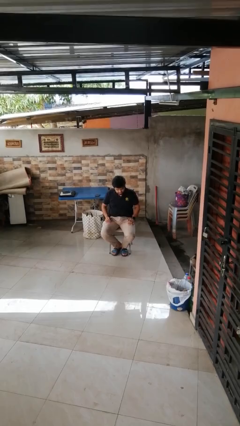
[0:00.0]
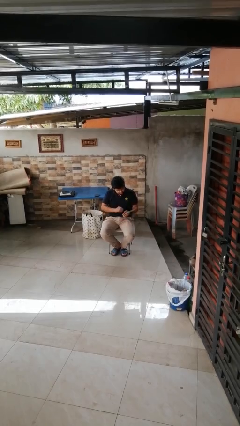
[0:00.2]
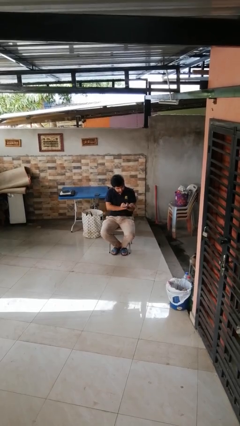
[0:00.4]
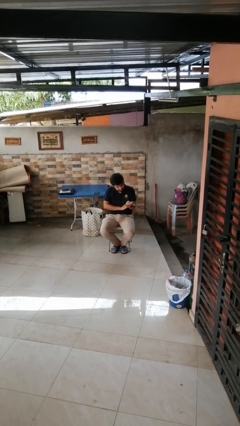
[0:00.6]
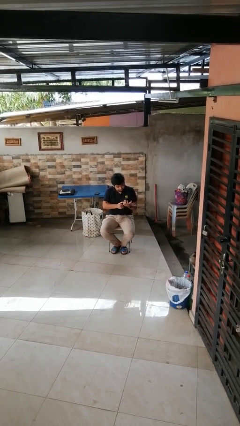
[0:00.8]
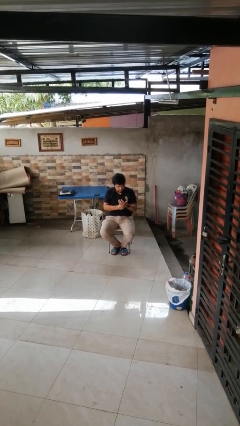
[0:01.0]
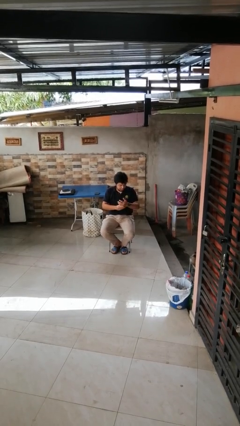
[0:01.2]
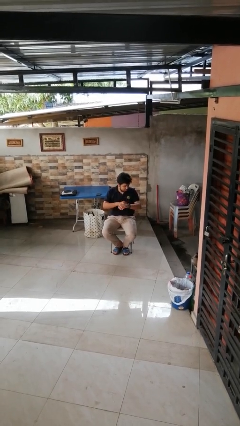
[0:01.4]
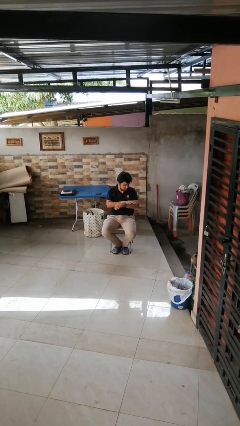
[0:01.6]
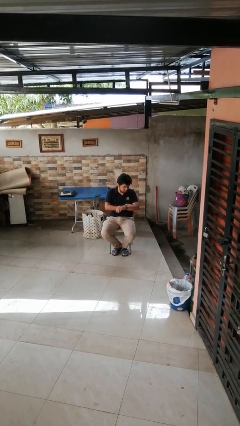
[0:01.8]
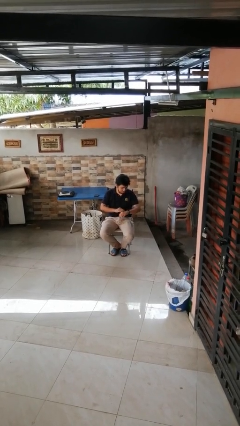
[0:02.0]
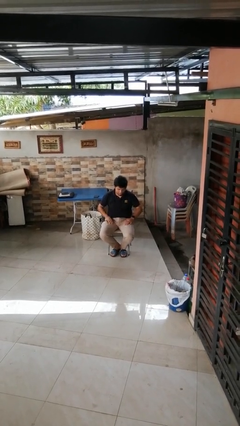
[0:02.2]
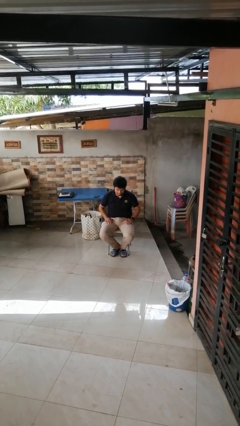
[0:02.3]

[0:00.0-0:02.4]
person looks at hands in lap

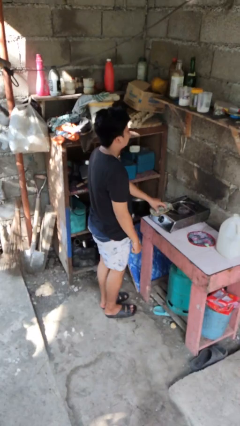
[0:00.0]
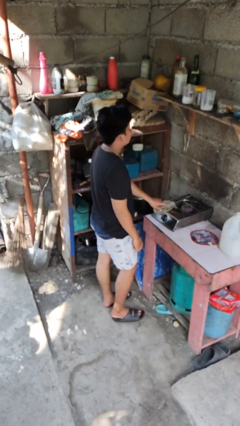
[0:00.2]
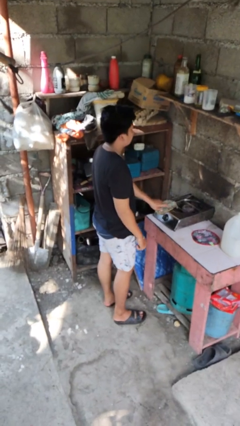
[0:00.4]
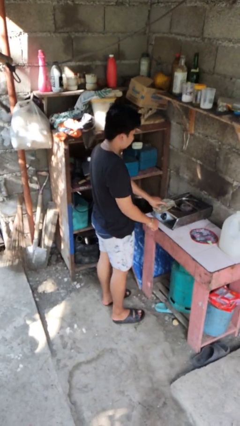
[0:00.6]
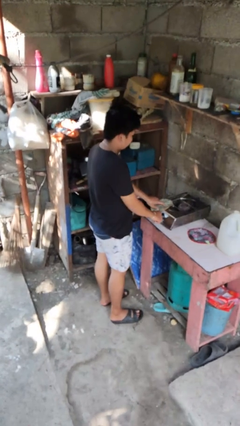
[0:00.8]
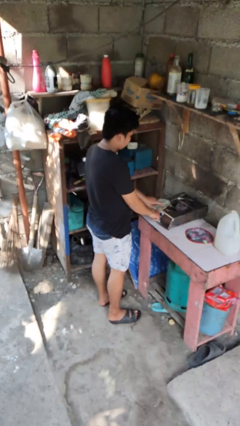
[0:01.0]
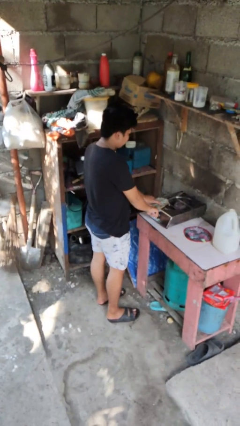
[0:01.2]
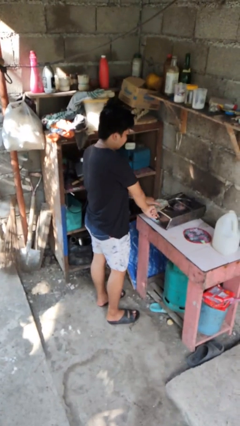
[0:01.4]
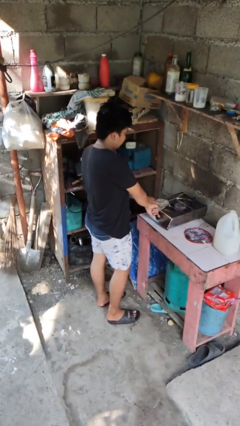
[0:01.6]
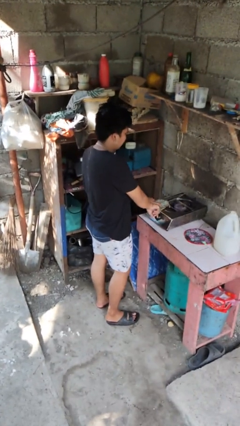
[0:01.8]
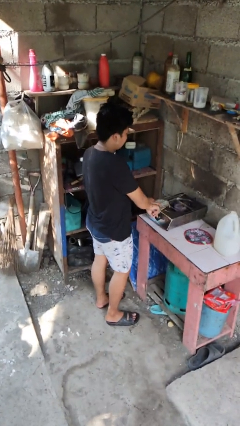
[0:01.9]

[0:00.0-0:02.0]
person turns on stovetop

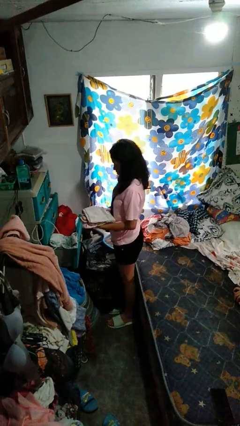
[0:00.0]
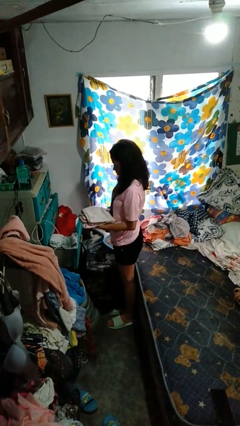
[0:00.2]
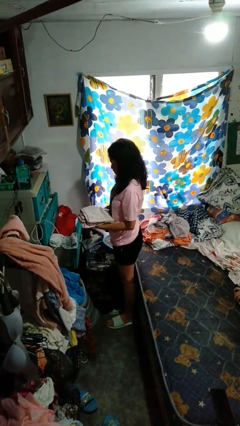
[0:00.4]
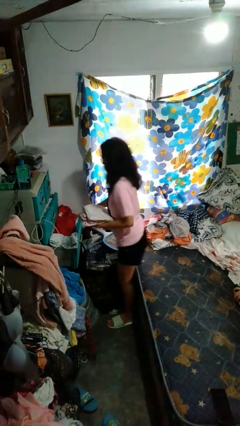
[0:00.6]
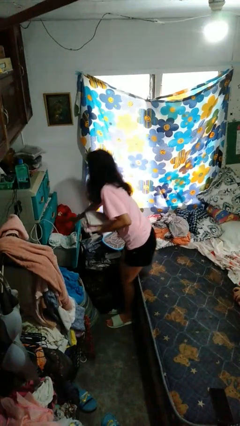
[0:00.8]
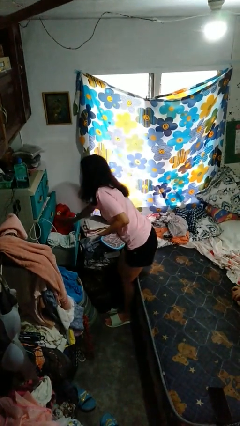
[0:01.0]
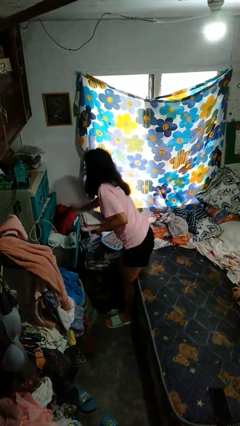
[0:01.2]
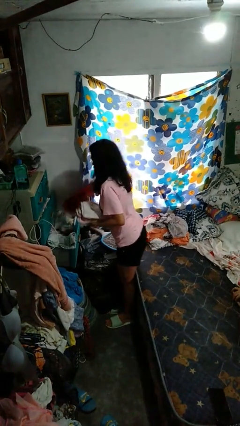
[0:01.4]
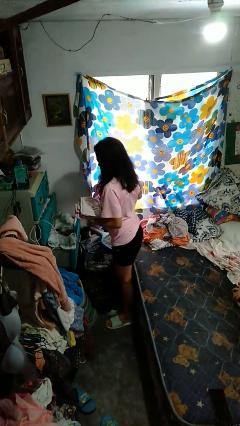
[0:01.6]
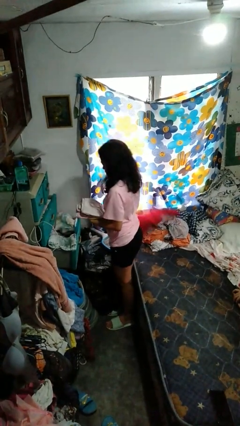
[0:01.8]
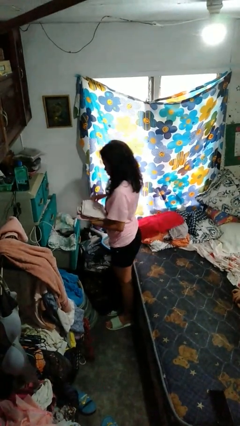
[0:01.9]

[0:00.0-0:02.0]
person takes clothes from dresser

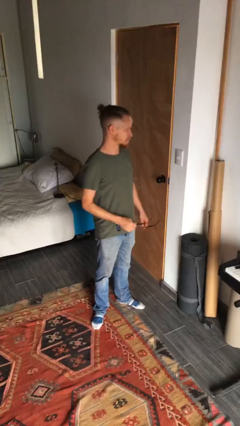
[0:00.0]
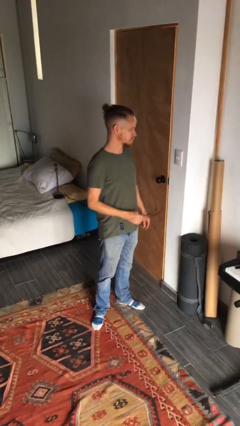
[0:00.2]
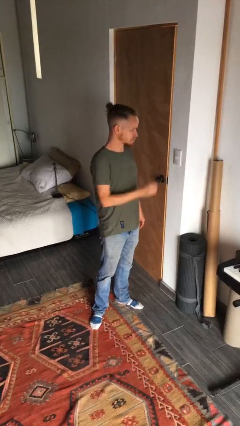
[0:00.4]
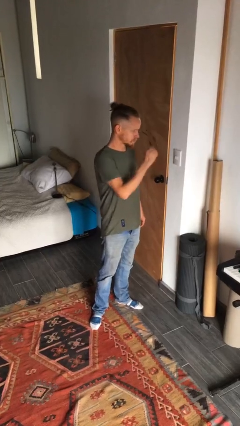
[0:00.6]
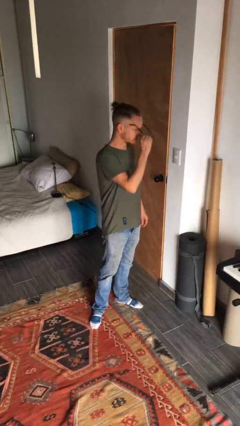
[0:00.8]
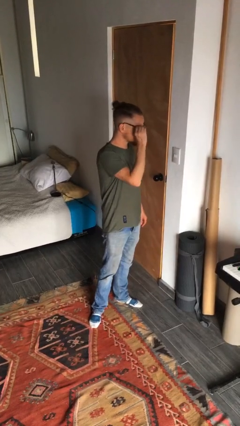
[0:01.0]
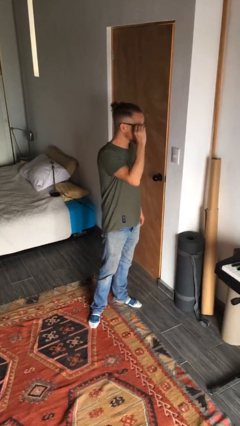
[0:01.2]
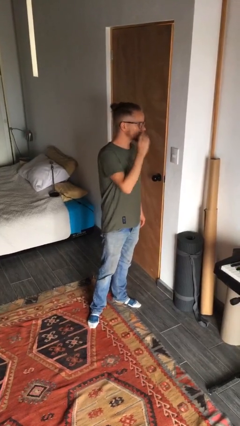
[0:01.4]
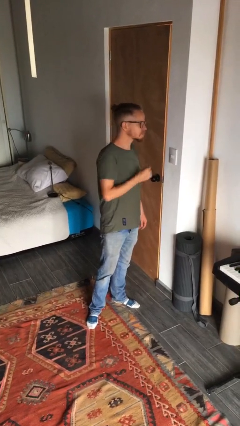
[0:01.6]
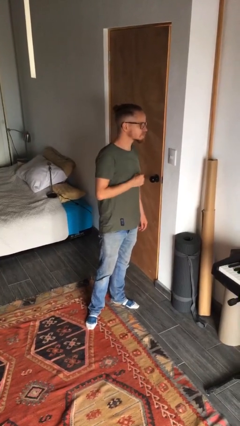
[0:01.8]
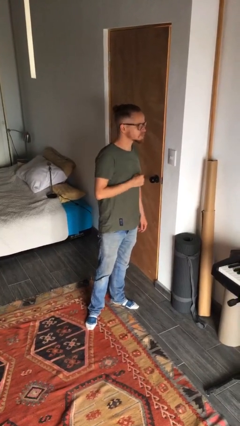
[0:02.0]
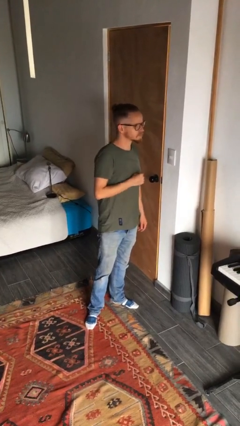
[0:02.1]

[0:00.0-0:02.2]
person puts on glasses

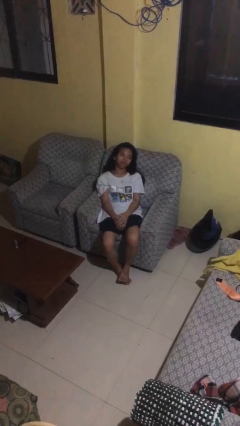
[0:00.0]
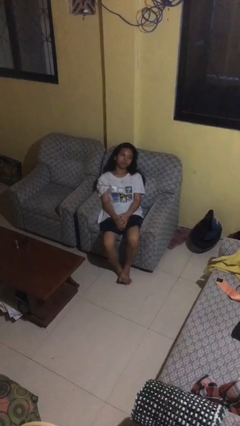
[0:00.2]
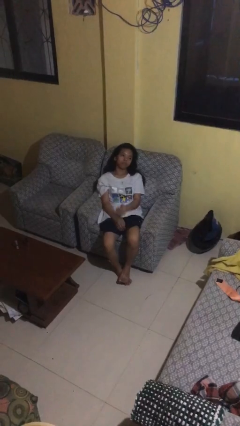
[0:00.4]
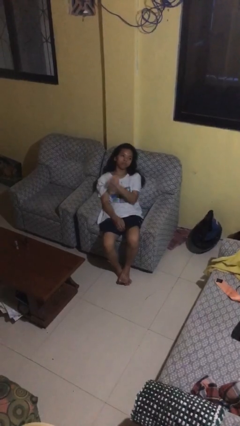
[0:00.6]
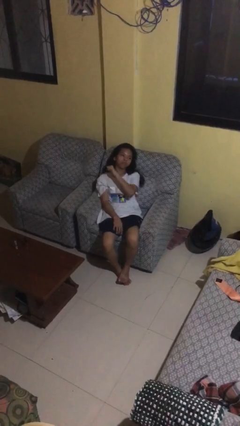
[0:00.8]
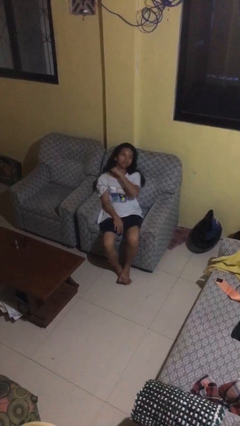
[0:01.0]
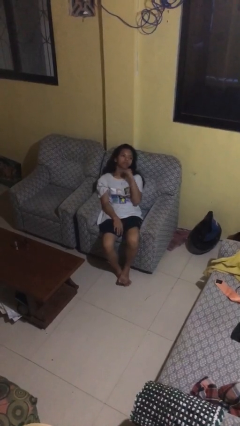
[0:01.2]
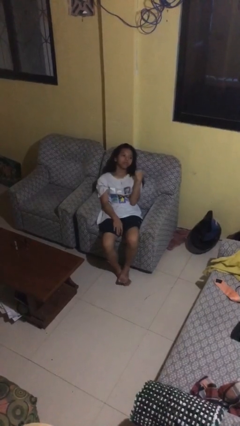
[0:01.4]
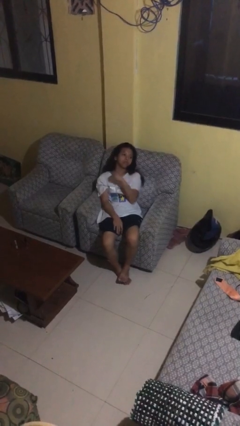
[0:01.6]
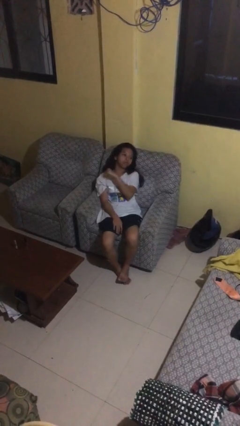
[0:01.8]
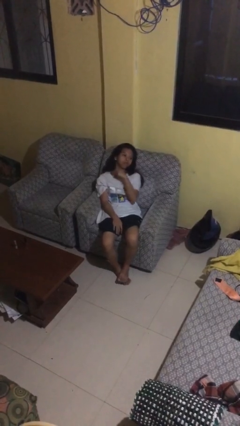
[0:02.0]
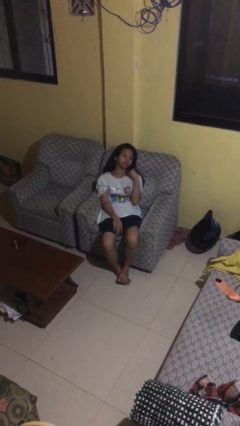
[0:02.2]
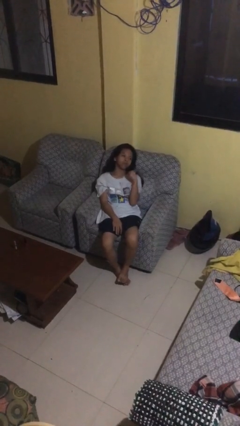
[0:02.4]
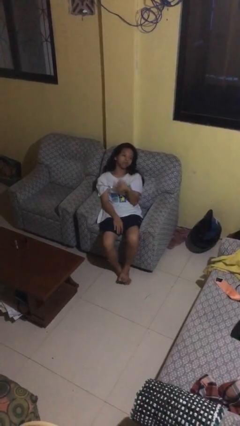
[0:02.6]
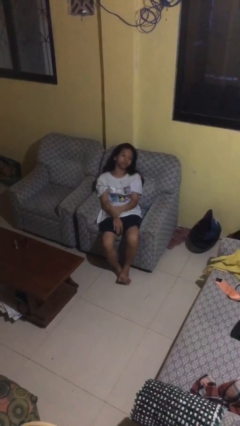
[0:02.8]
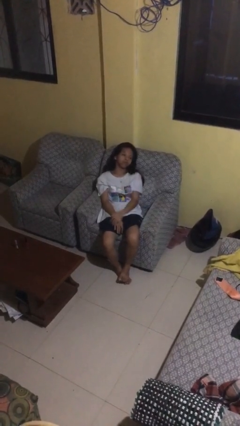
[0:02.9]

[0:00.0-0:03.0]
person gestures cut

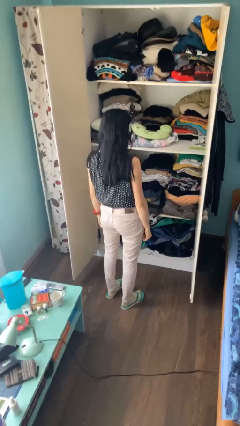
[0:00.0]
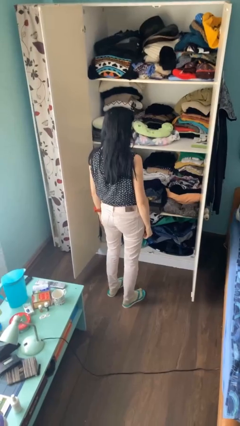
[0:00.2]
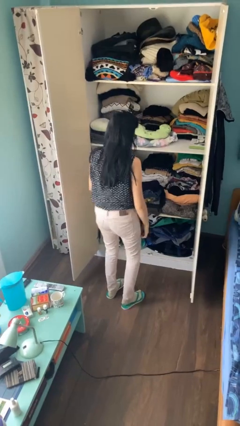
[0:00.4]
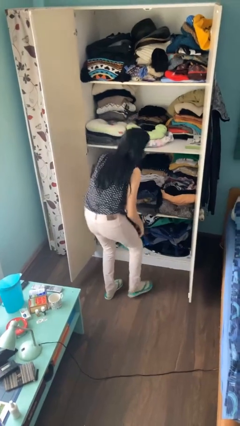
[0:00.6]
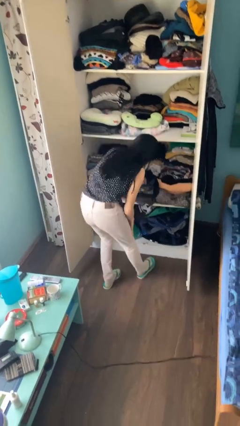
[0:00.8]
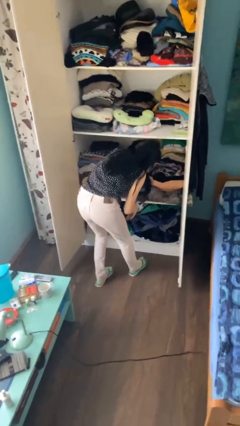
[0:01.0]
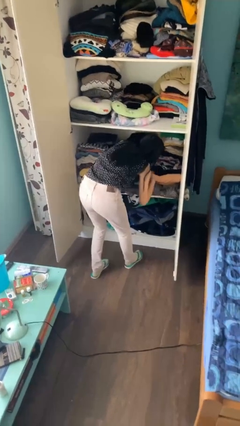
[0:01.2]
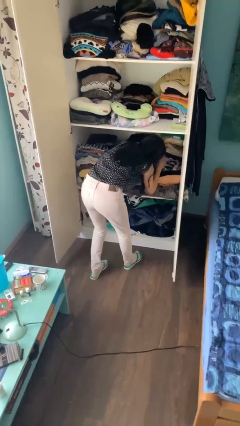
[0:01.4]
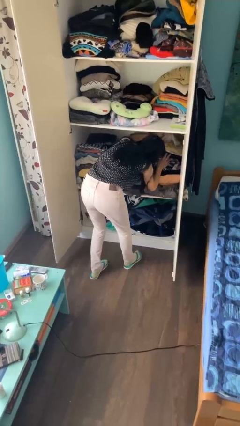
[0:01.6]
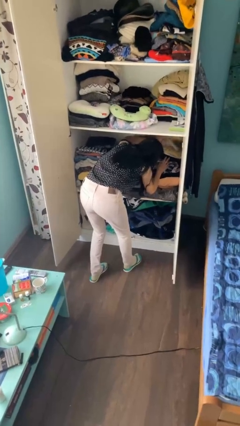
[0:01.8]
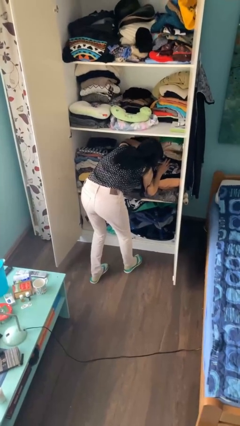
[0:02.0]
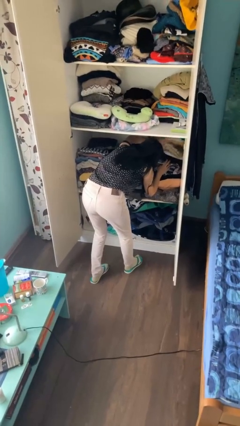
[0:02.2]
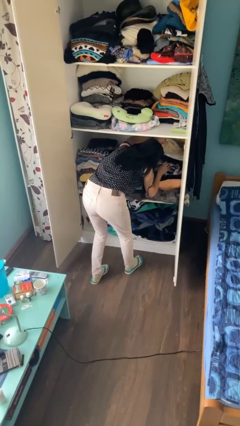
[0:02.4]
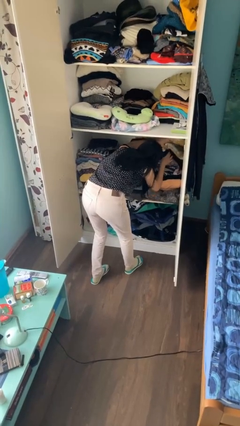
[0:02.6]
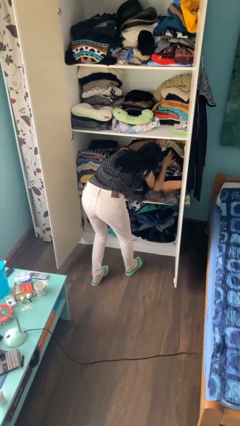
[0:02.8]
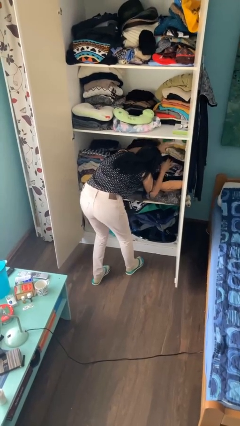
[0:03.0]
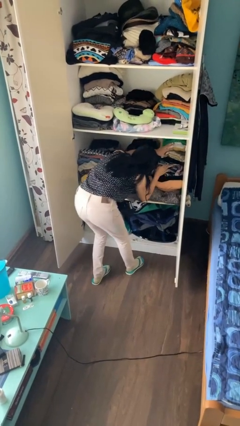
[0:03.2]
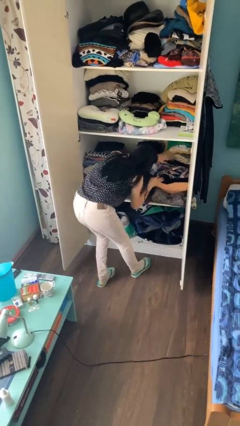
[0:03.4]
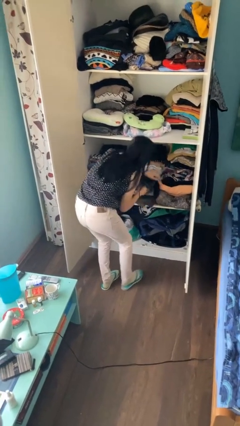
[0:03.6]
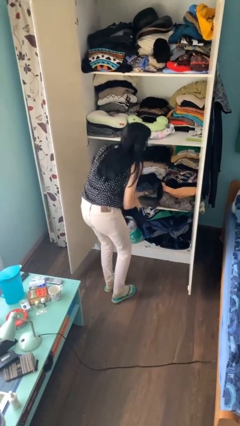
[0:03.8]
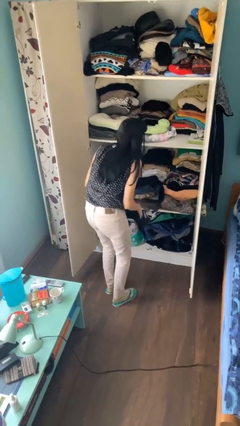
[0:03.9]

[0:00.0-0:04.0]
person searches in cabinet

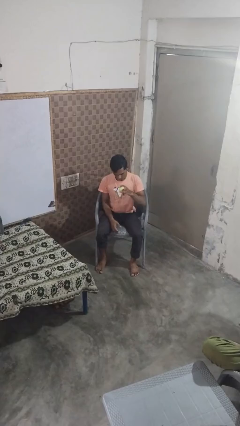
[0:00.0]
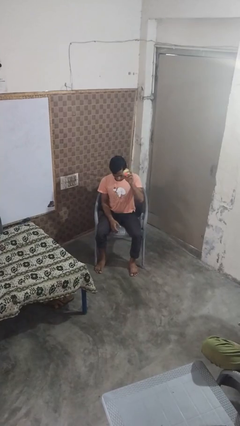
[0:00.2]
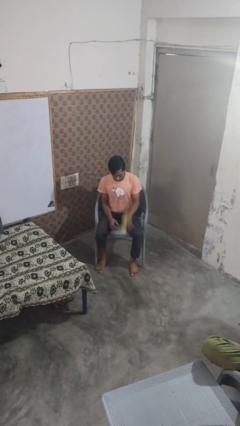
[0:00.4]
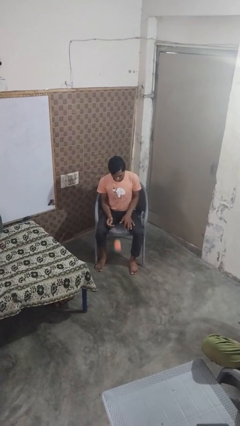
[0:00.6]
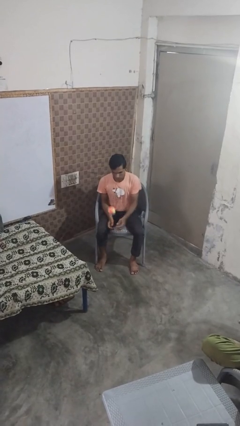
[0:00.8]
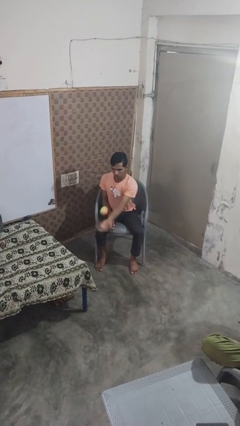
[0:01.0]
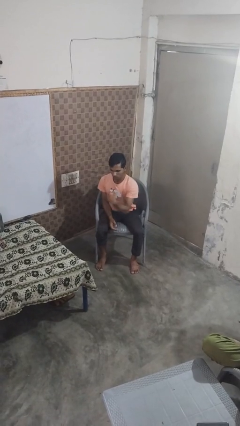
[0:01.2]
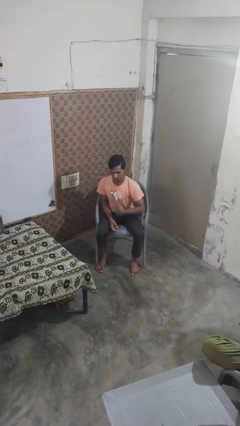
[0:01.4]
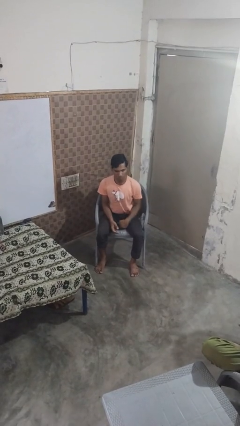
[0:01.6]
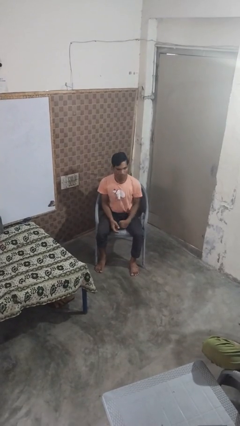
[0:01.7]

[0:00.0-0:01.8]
person bounces ball on floor
